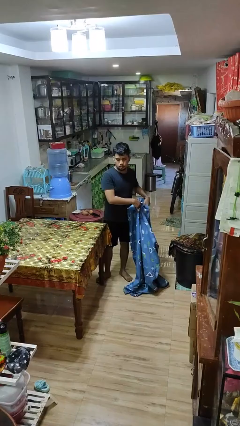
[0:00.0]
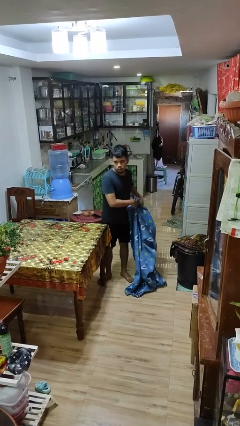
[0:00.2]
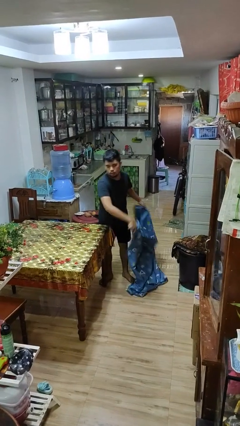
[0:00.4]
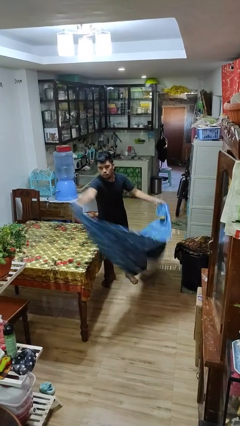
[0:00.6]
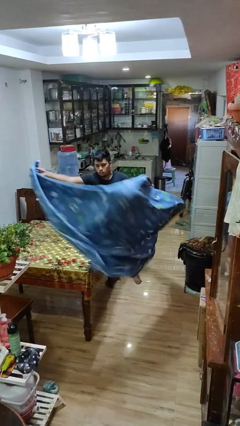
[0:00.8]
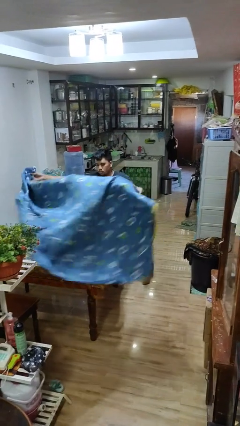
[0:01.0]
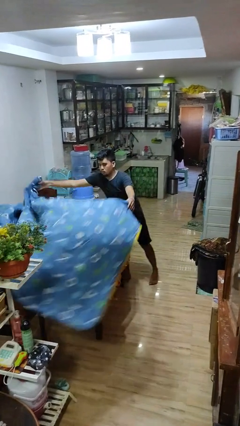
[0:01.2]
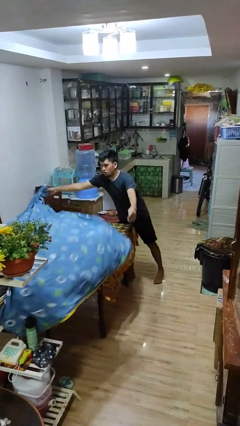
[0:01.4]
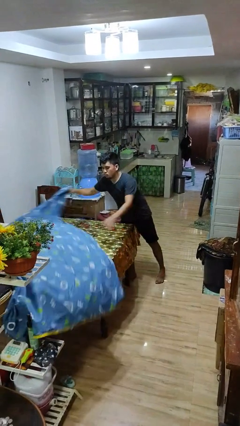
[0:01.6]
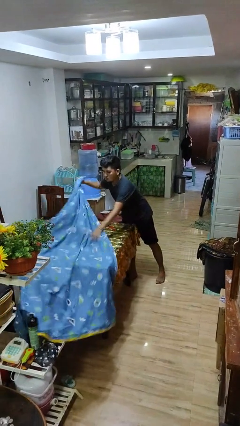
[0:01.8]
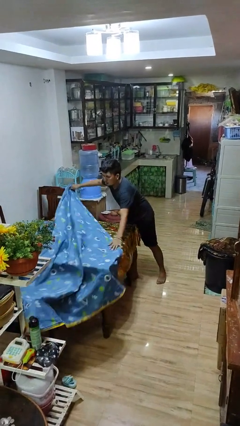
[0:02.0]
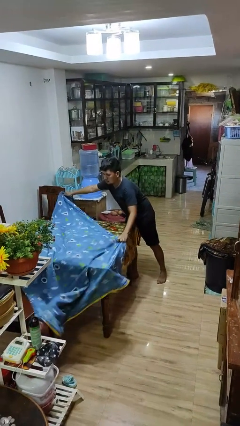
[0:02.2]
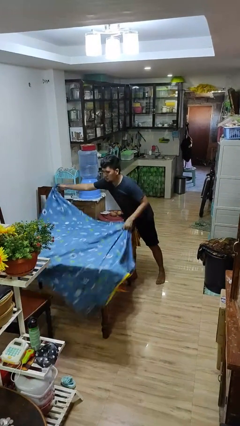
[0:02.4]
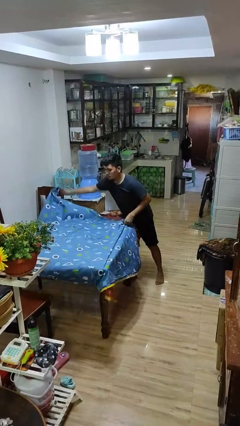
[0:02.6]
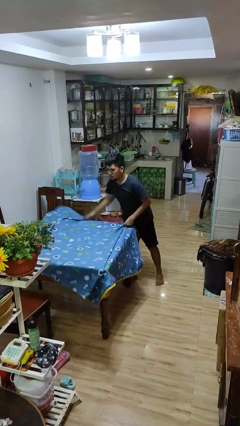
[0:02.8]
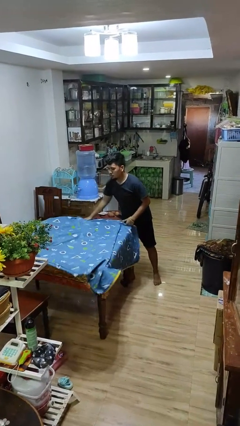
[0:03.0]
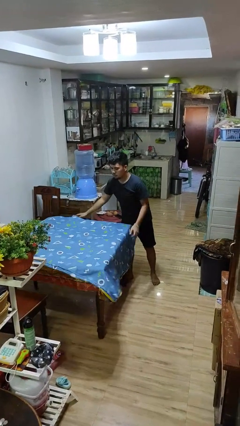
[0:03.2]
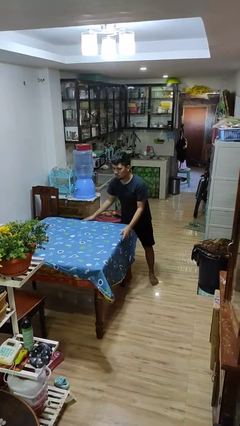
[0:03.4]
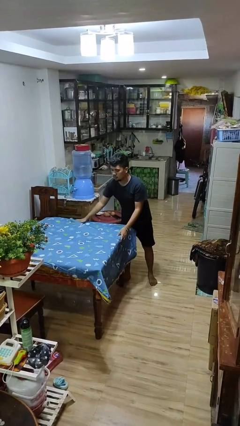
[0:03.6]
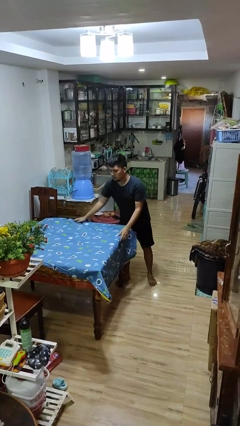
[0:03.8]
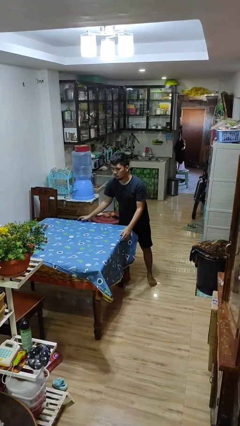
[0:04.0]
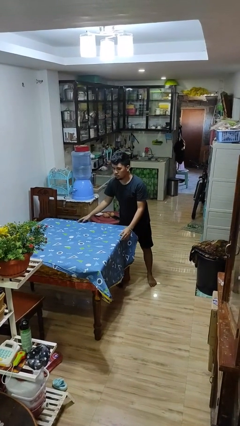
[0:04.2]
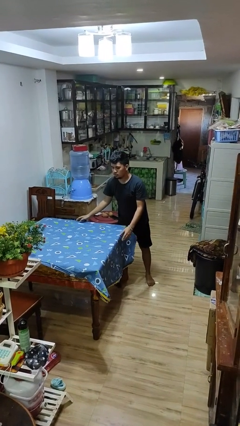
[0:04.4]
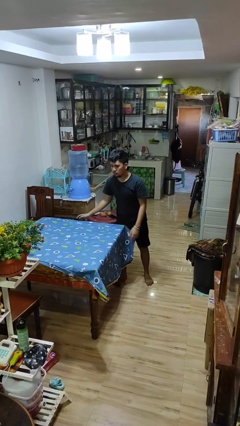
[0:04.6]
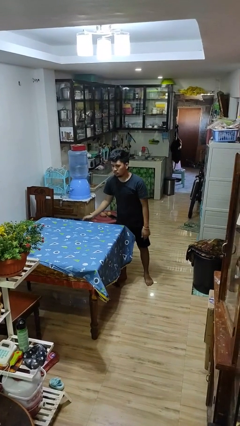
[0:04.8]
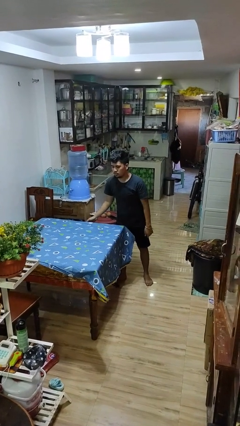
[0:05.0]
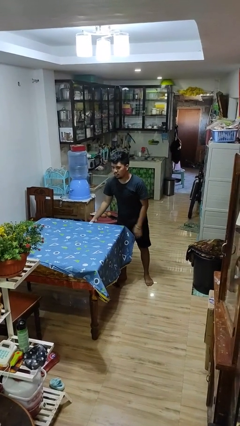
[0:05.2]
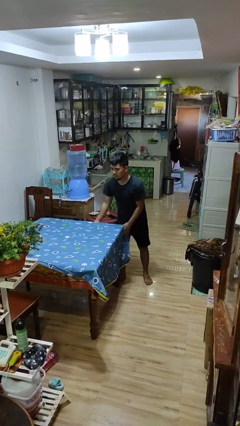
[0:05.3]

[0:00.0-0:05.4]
person spreads tablecloth

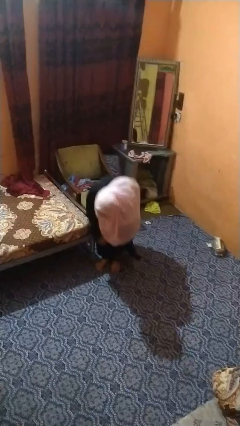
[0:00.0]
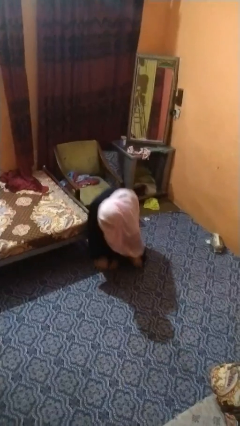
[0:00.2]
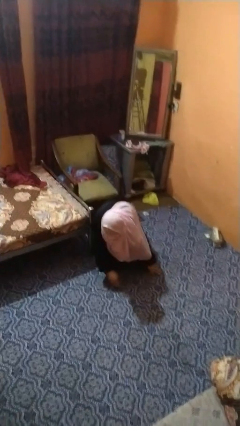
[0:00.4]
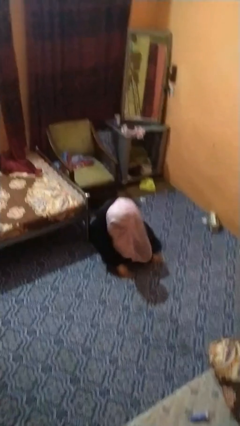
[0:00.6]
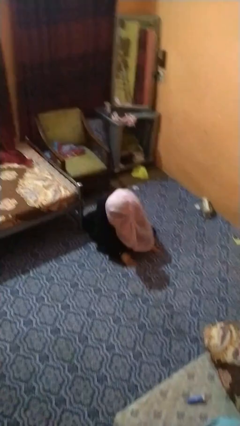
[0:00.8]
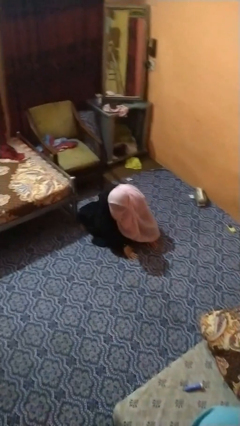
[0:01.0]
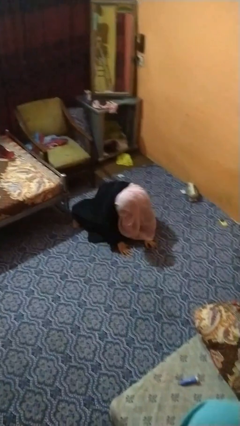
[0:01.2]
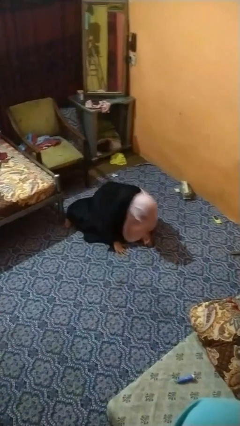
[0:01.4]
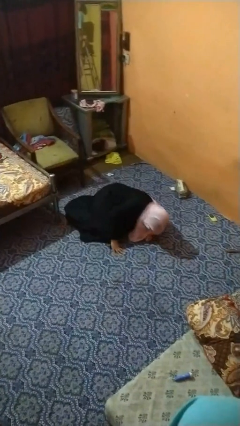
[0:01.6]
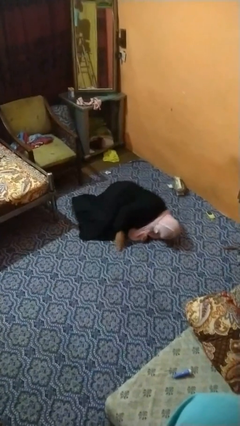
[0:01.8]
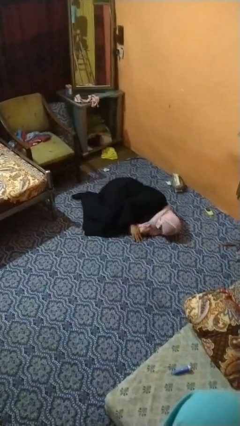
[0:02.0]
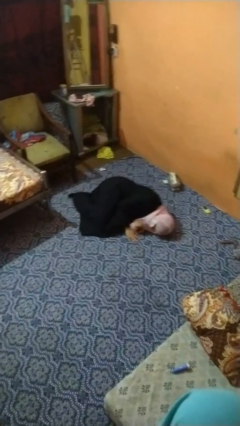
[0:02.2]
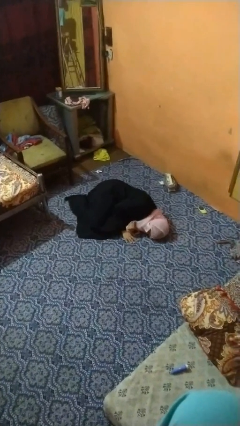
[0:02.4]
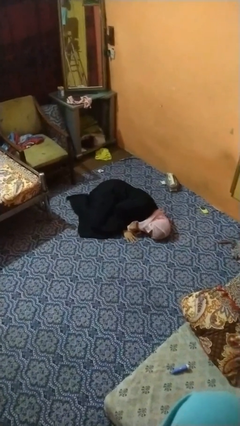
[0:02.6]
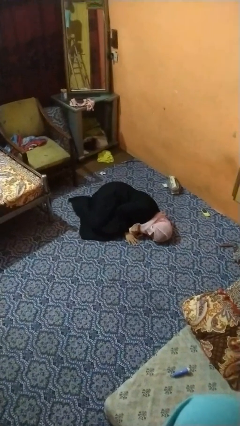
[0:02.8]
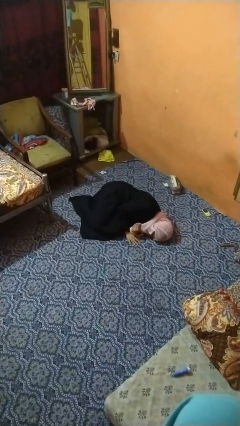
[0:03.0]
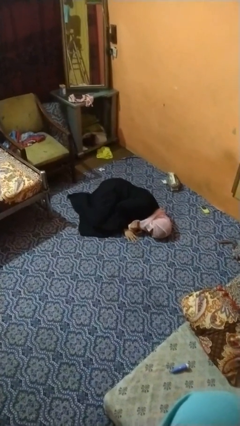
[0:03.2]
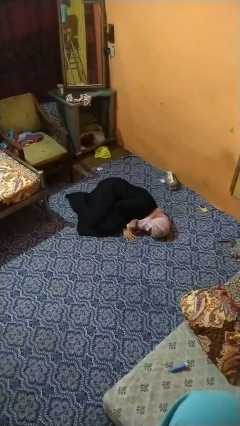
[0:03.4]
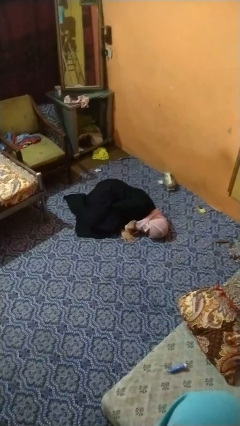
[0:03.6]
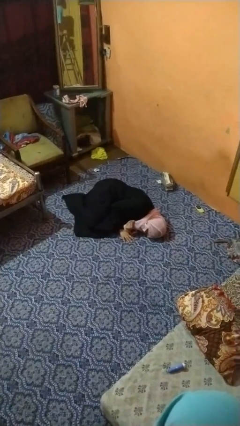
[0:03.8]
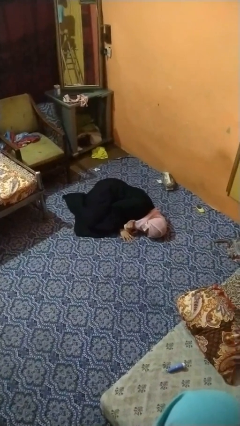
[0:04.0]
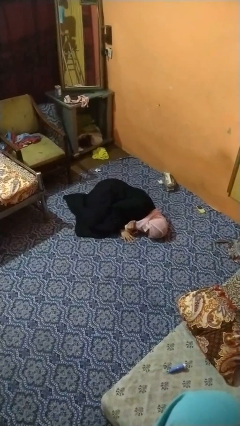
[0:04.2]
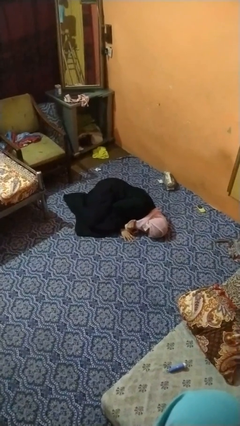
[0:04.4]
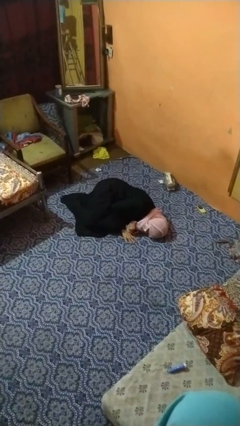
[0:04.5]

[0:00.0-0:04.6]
person lies down on floor

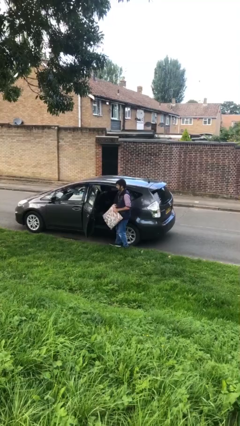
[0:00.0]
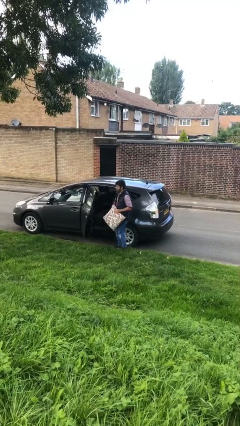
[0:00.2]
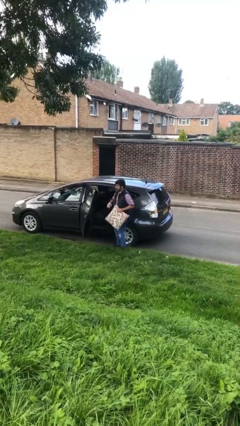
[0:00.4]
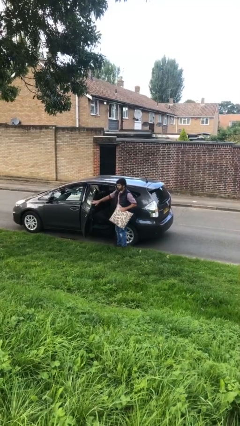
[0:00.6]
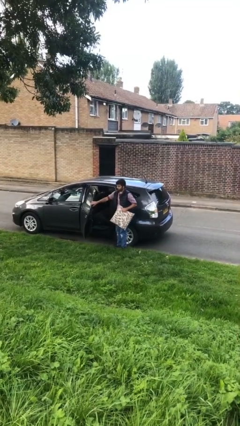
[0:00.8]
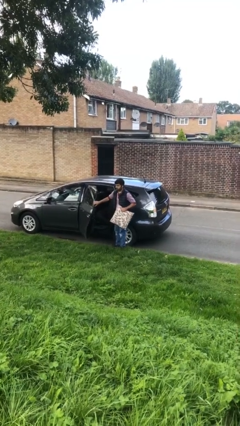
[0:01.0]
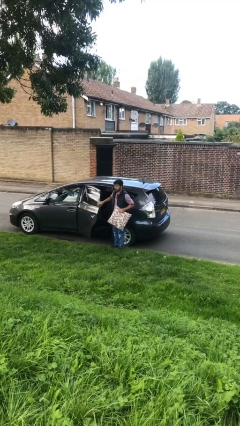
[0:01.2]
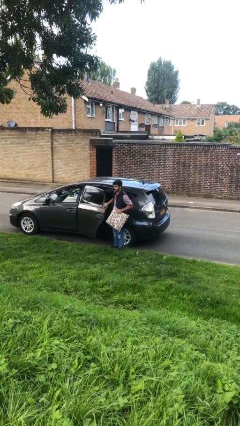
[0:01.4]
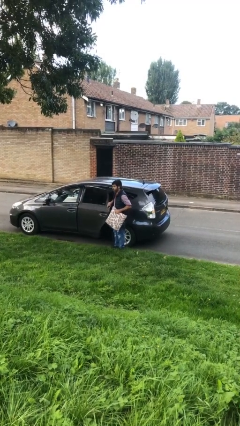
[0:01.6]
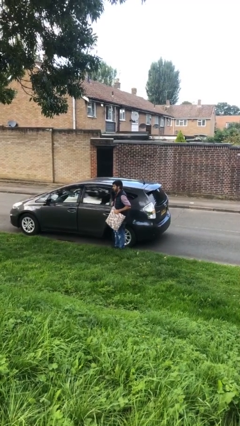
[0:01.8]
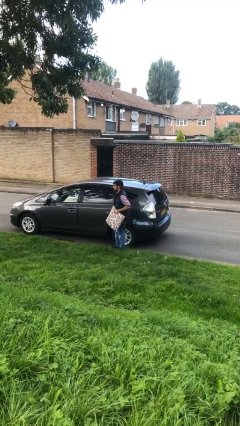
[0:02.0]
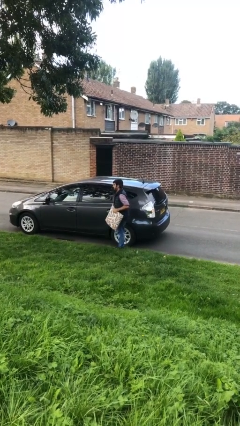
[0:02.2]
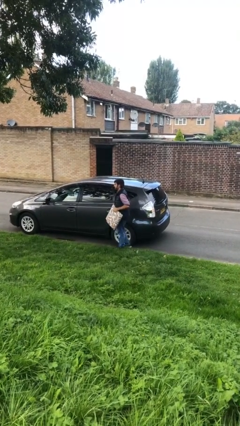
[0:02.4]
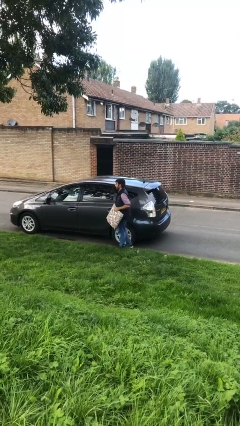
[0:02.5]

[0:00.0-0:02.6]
person closes car door

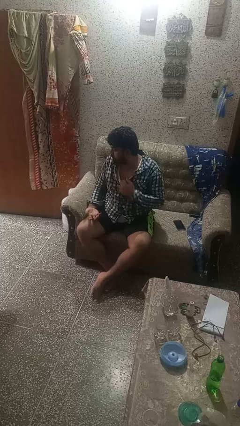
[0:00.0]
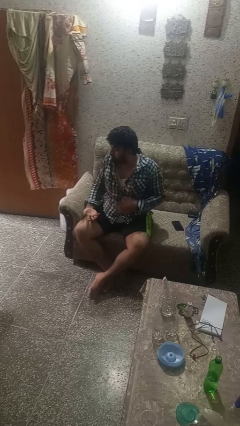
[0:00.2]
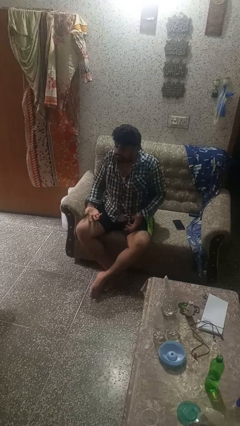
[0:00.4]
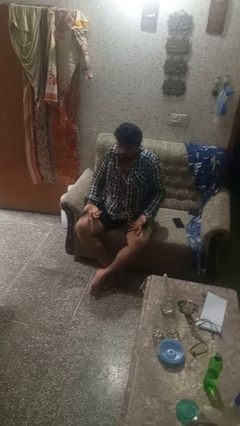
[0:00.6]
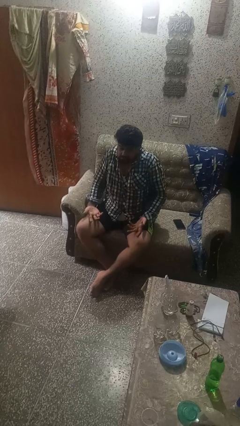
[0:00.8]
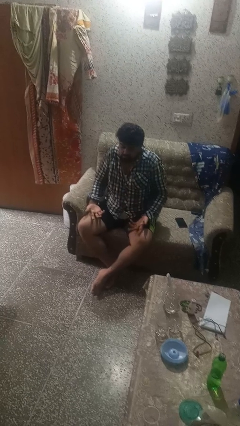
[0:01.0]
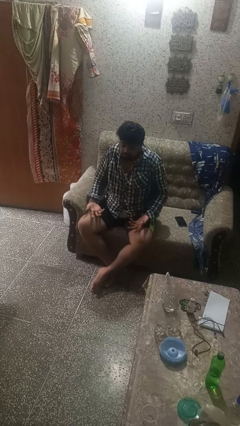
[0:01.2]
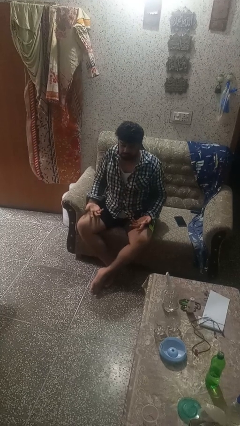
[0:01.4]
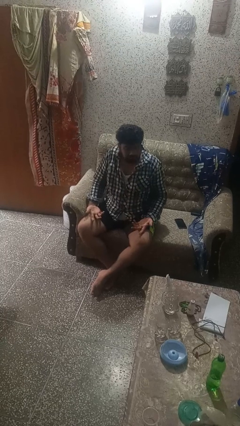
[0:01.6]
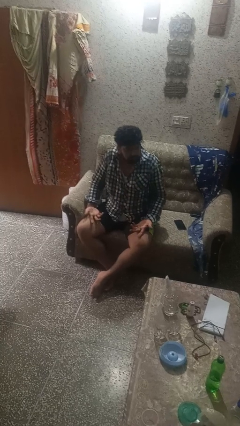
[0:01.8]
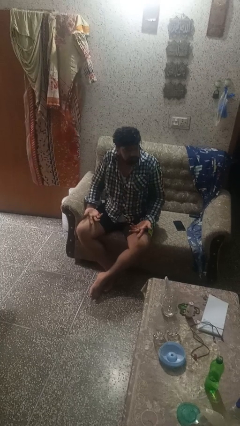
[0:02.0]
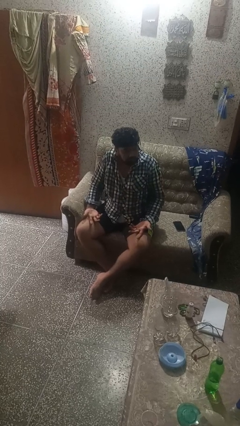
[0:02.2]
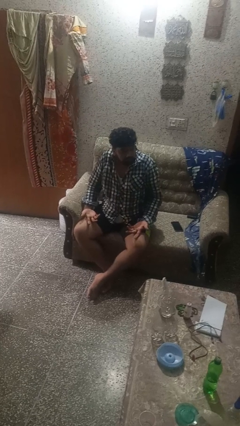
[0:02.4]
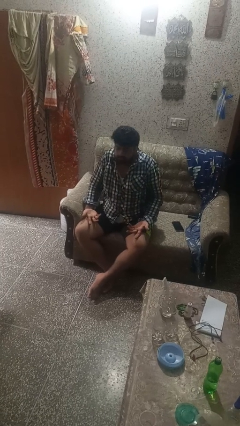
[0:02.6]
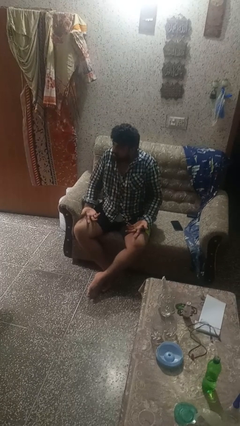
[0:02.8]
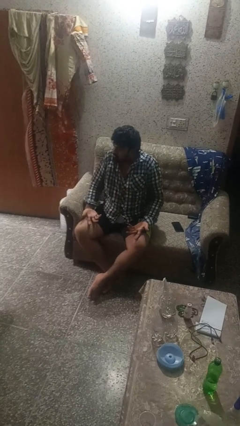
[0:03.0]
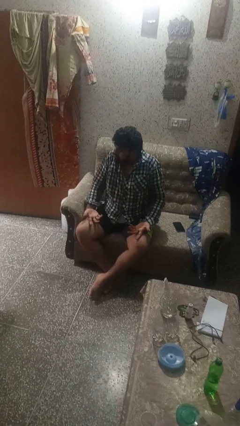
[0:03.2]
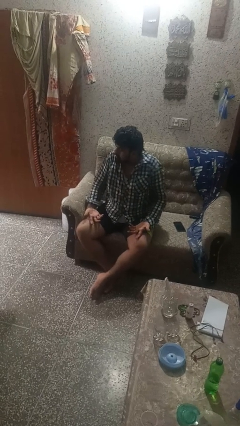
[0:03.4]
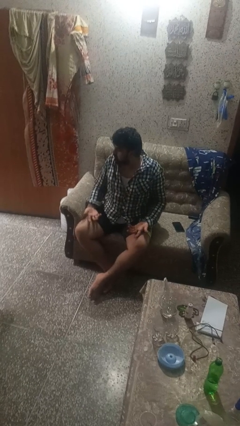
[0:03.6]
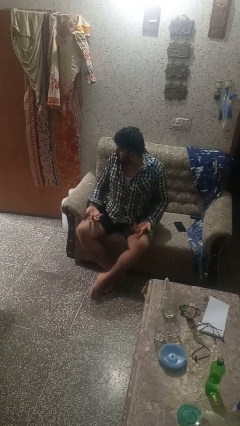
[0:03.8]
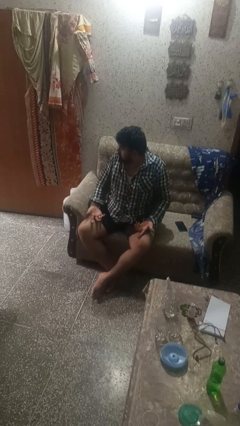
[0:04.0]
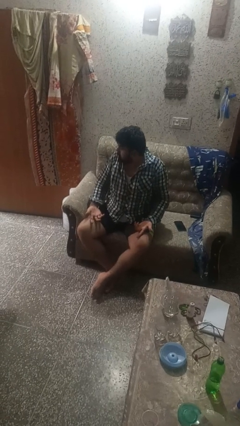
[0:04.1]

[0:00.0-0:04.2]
person shrugs

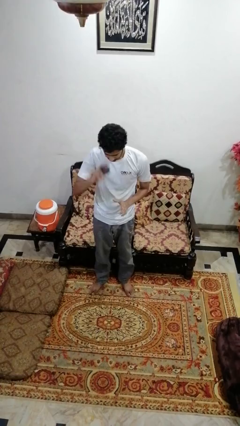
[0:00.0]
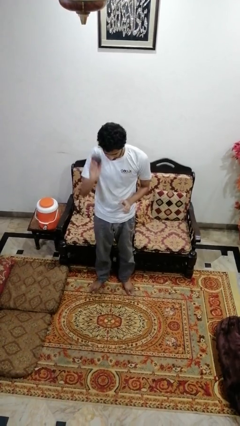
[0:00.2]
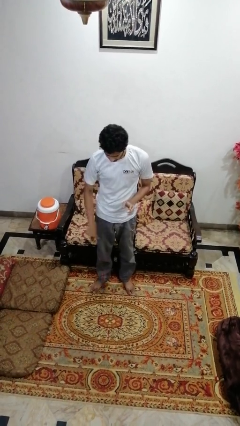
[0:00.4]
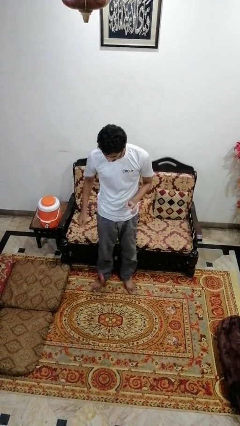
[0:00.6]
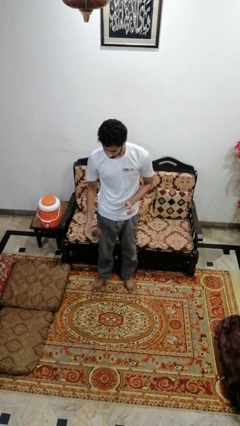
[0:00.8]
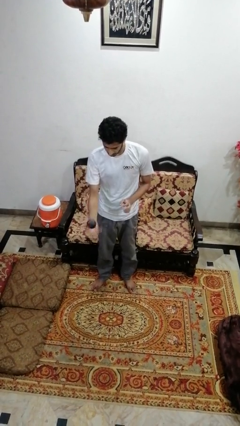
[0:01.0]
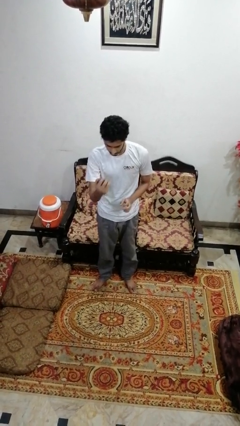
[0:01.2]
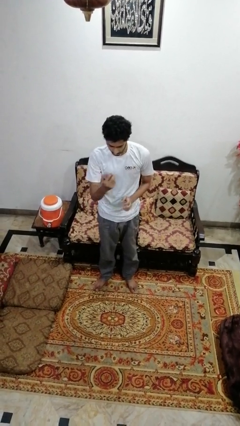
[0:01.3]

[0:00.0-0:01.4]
person bounces ball on floor
